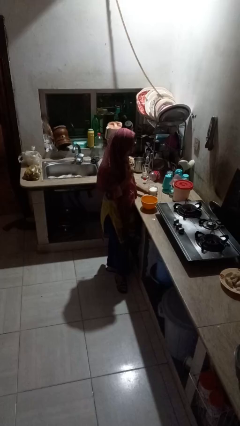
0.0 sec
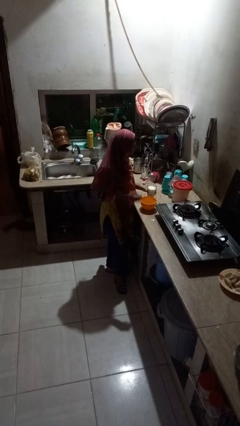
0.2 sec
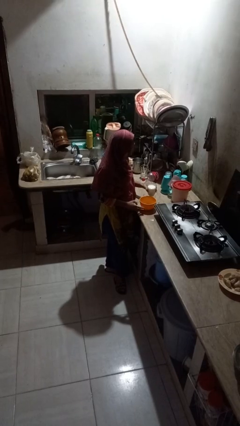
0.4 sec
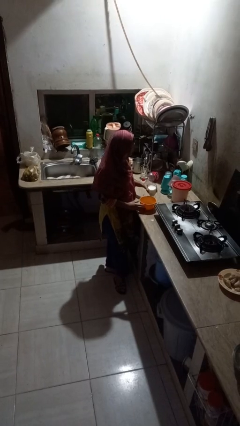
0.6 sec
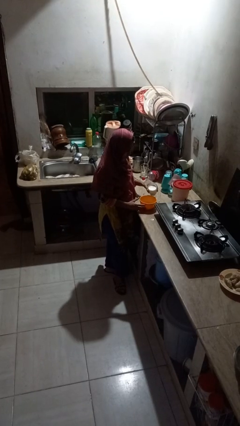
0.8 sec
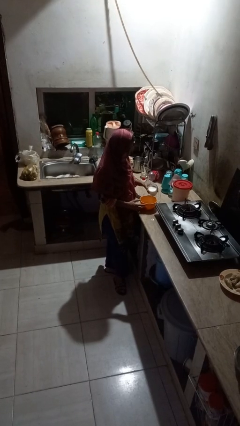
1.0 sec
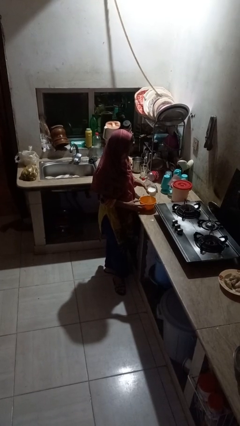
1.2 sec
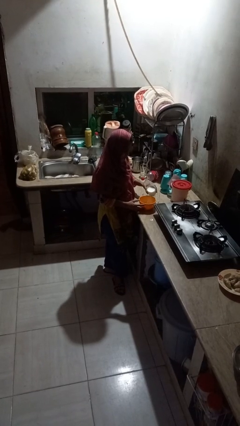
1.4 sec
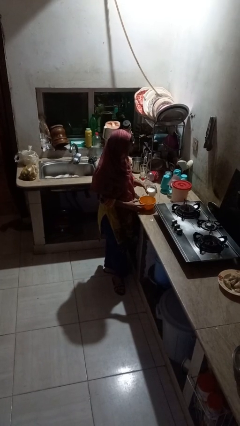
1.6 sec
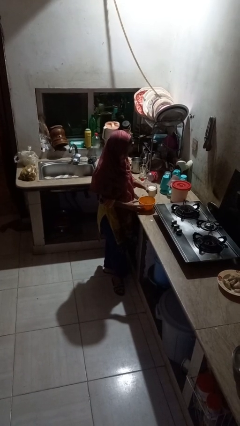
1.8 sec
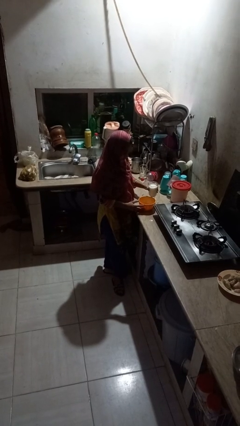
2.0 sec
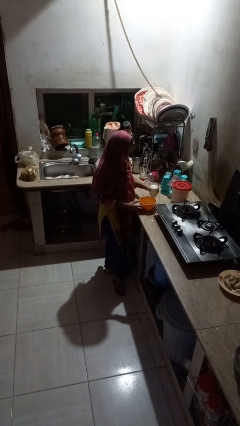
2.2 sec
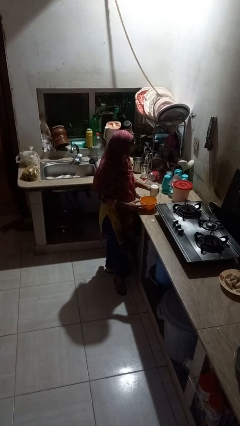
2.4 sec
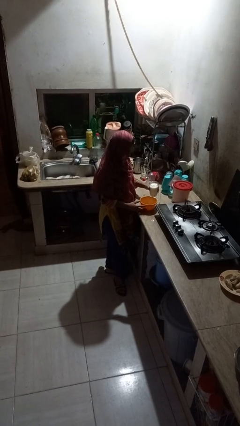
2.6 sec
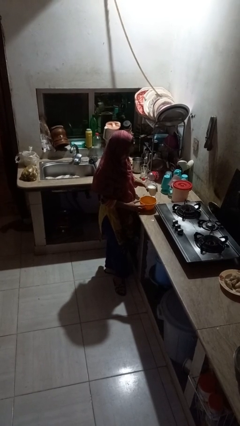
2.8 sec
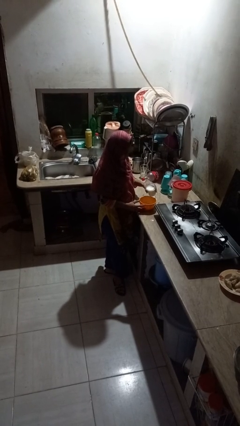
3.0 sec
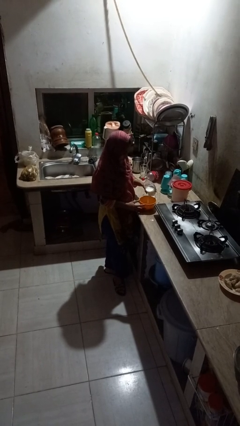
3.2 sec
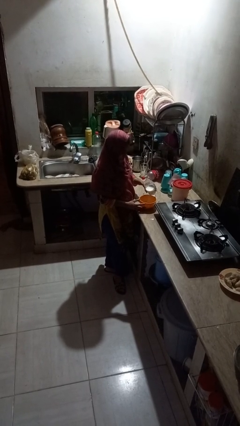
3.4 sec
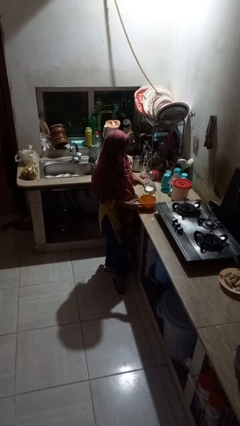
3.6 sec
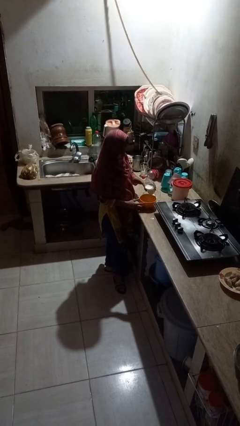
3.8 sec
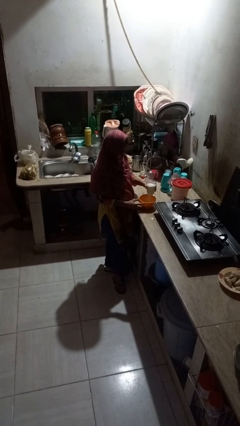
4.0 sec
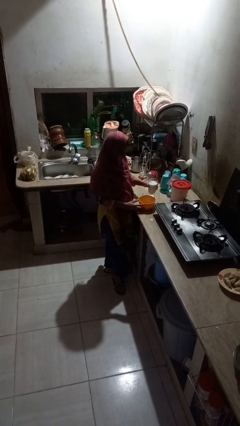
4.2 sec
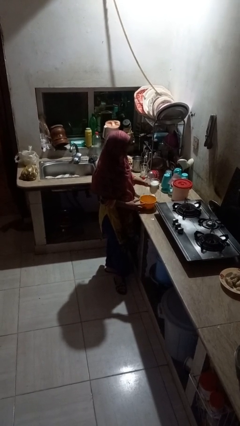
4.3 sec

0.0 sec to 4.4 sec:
person pours into bowl

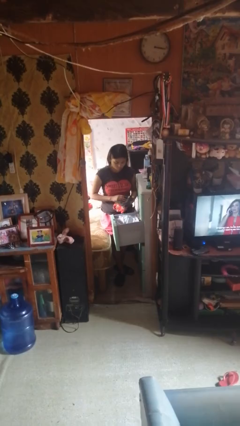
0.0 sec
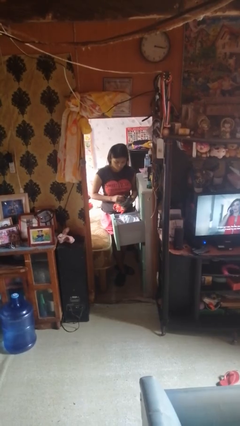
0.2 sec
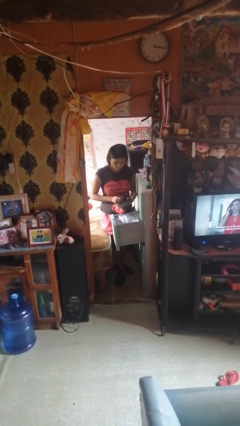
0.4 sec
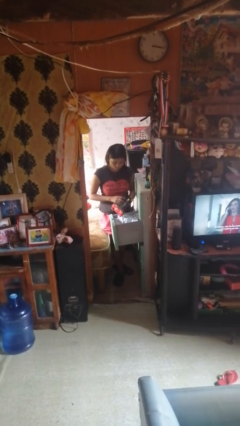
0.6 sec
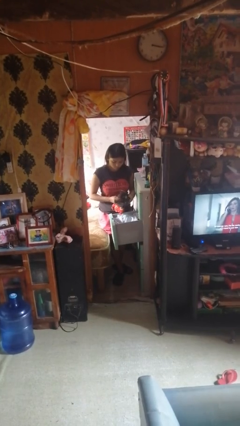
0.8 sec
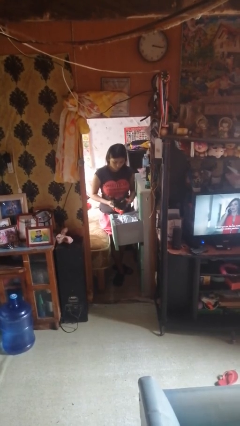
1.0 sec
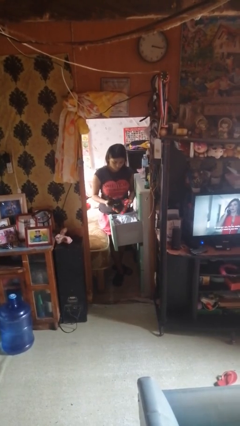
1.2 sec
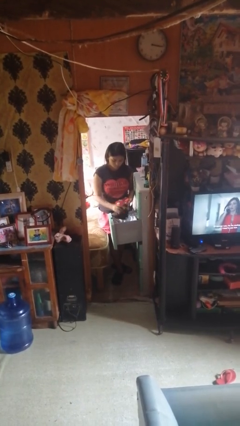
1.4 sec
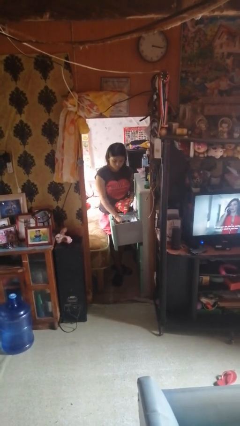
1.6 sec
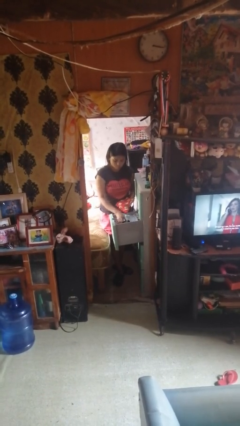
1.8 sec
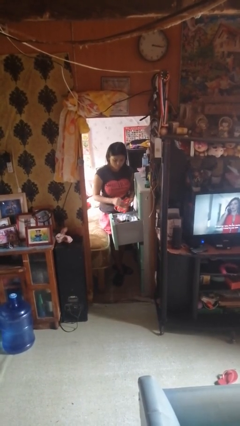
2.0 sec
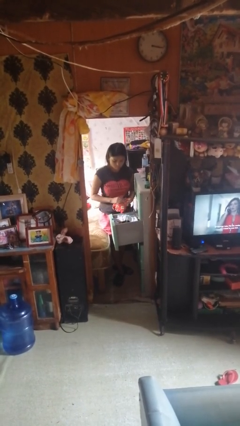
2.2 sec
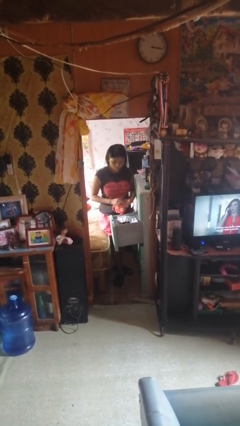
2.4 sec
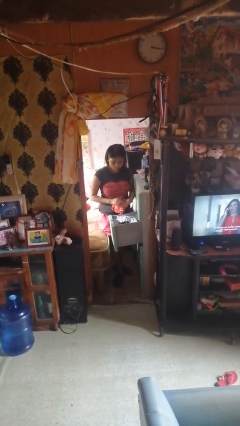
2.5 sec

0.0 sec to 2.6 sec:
person puts clothes into dresser

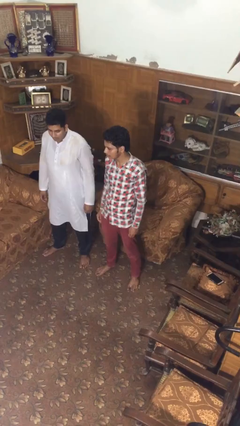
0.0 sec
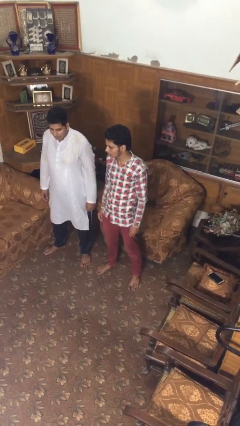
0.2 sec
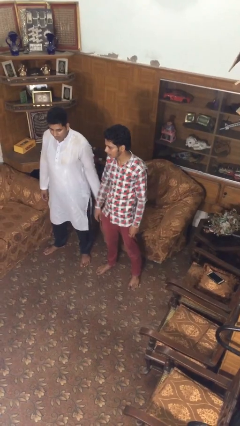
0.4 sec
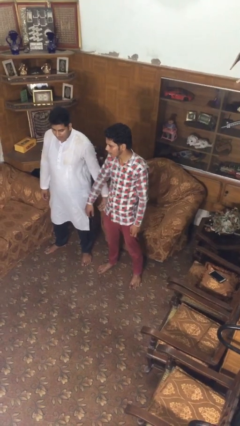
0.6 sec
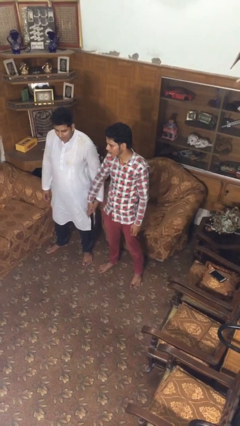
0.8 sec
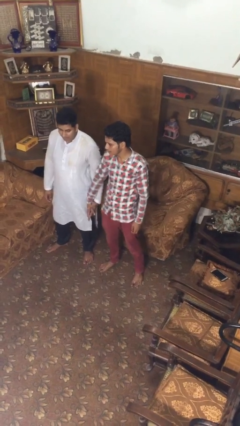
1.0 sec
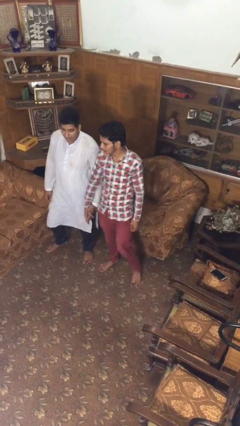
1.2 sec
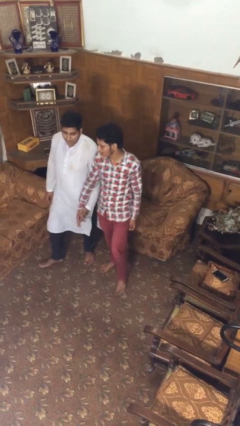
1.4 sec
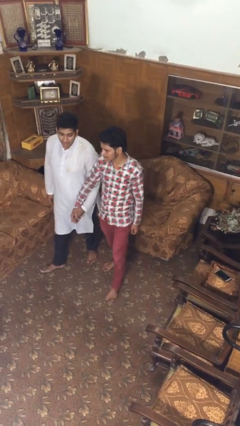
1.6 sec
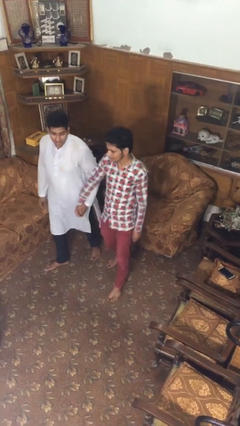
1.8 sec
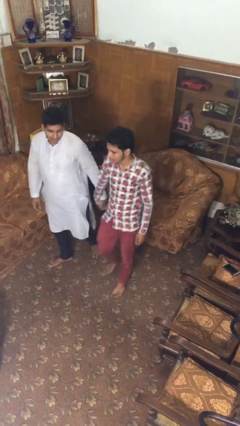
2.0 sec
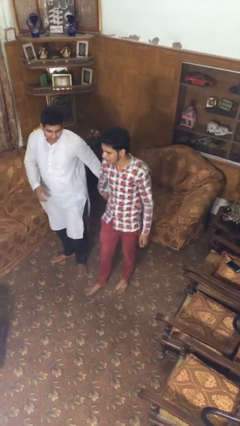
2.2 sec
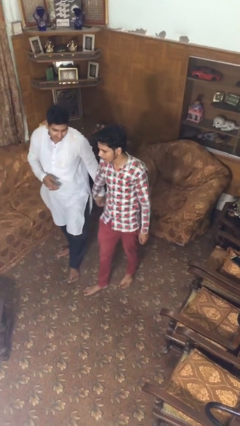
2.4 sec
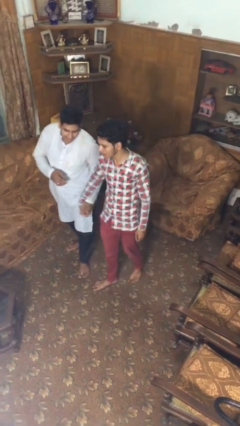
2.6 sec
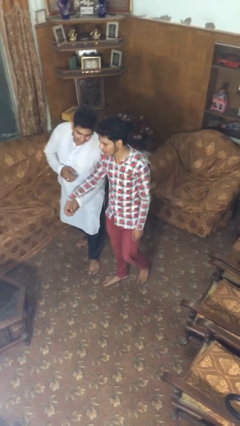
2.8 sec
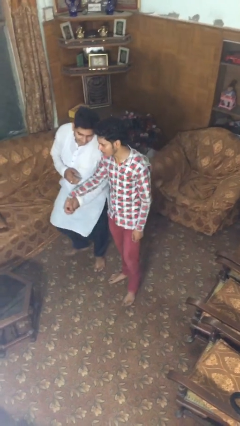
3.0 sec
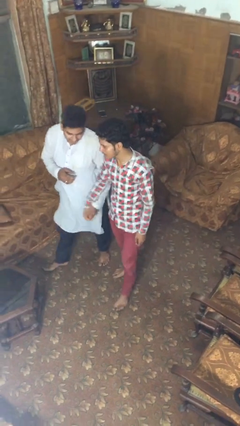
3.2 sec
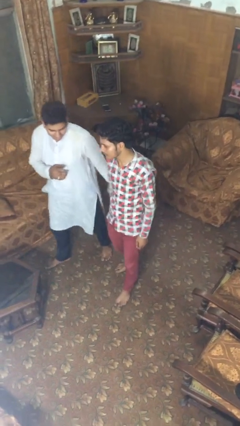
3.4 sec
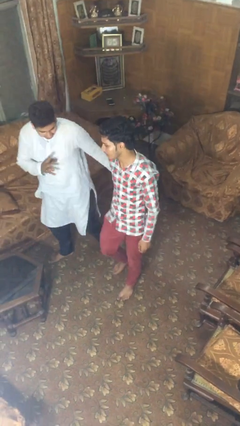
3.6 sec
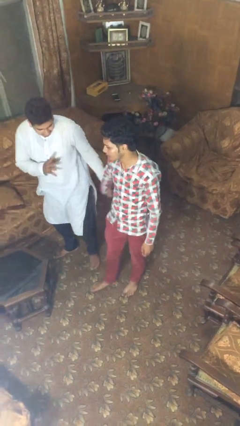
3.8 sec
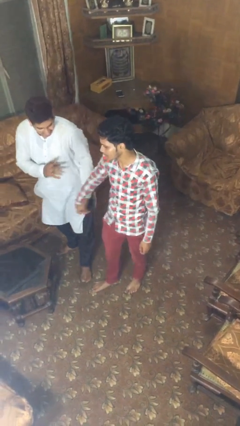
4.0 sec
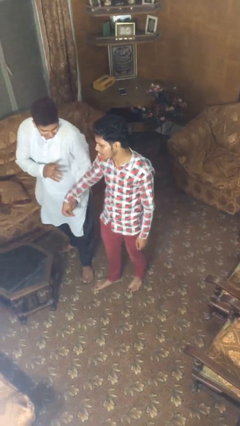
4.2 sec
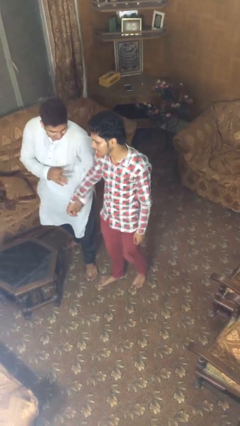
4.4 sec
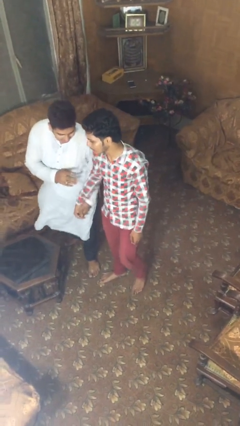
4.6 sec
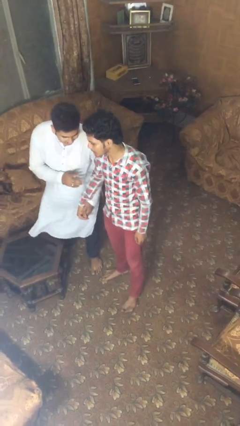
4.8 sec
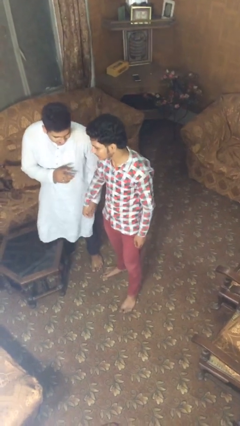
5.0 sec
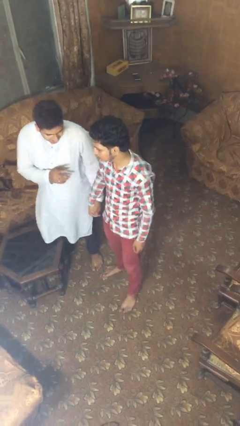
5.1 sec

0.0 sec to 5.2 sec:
person holds hand

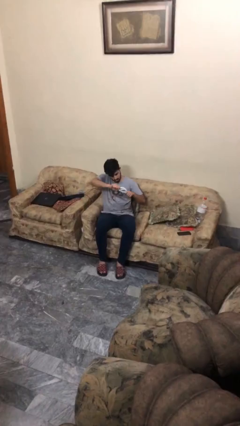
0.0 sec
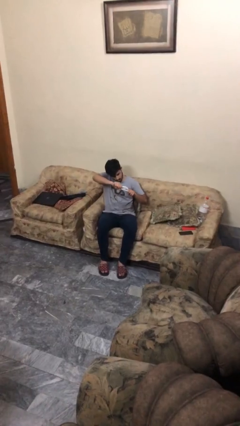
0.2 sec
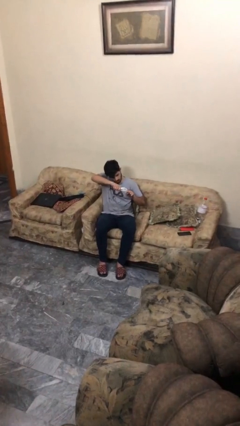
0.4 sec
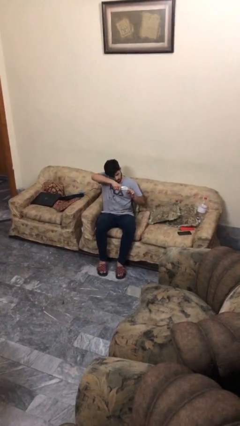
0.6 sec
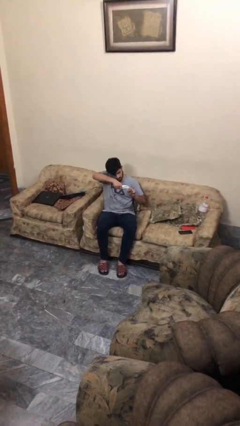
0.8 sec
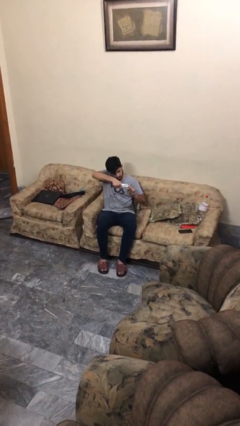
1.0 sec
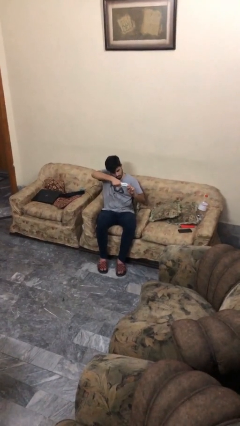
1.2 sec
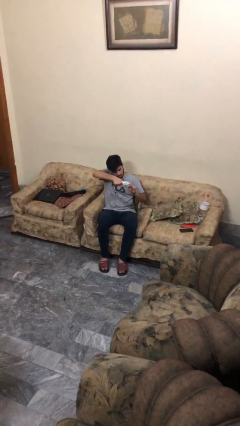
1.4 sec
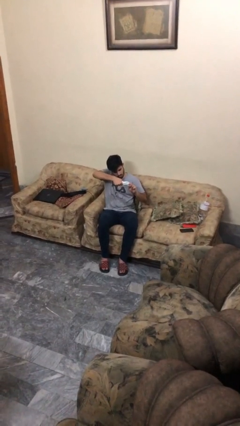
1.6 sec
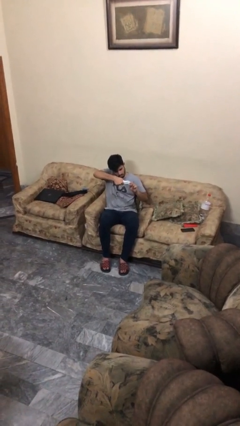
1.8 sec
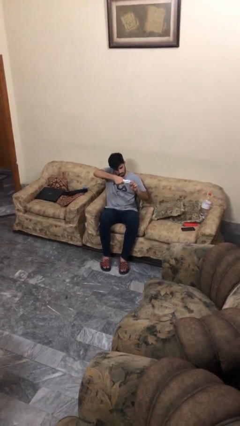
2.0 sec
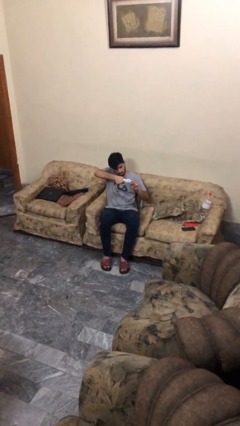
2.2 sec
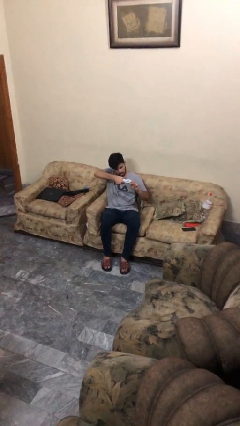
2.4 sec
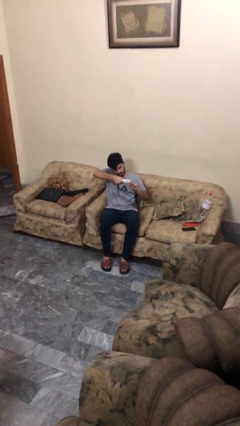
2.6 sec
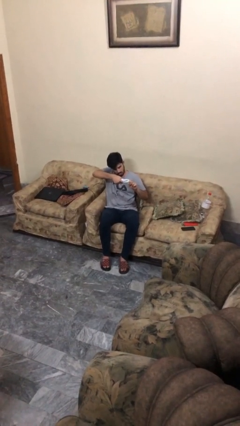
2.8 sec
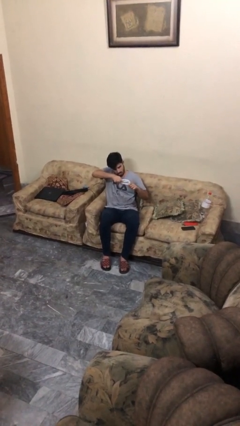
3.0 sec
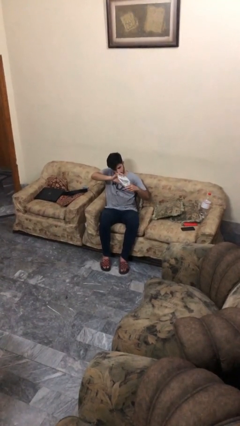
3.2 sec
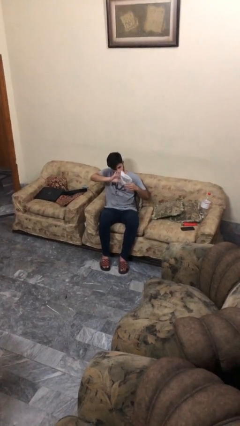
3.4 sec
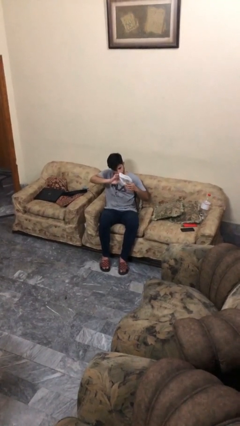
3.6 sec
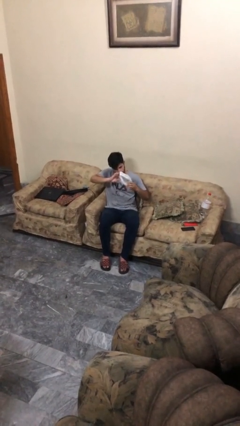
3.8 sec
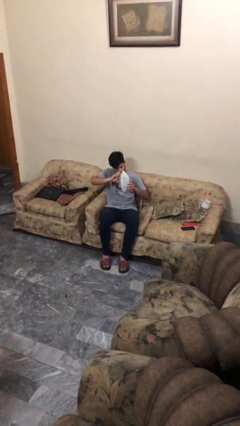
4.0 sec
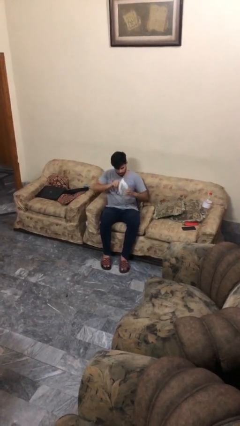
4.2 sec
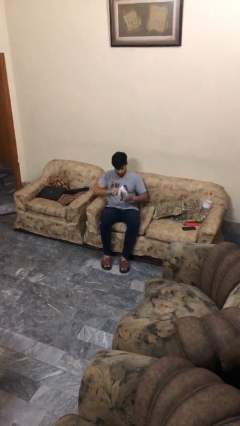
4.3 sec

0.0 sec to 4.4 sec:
person squeezes object

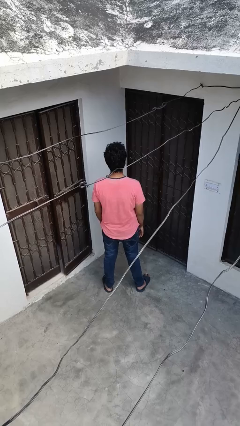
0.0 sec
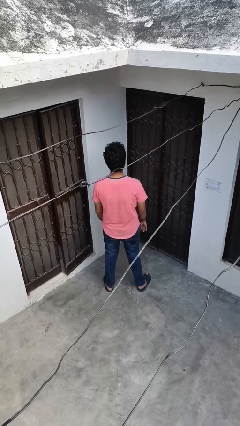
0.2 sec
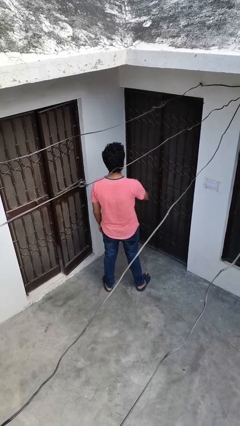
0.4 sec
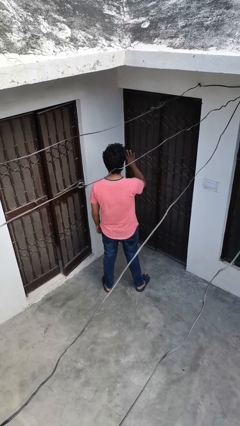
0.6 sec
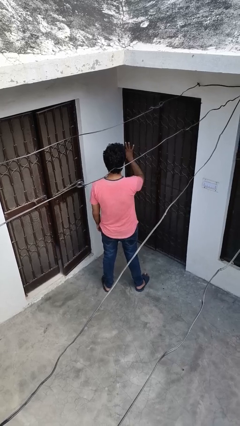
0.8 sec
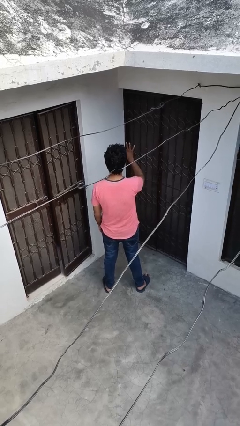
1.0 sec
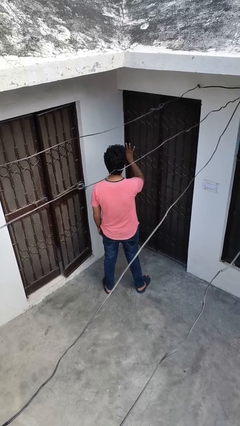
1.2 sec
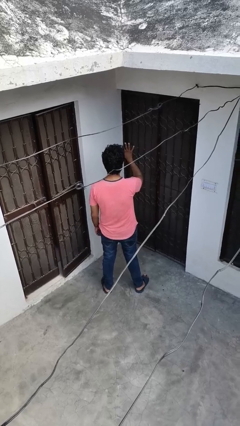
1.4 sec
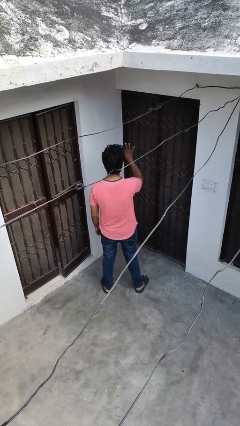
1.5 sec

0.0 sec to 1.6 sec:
person gestures number four
